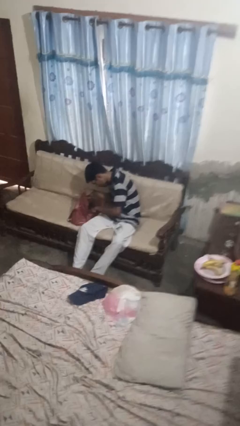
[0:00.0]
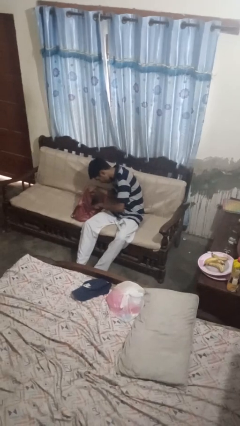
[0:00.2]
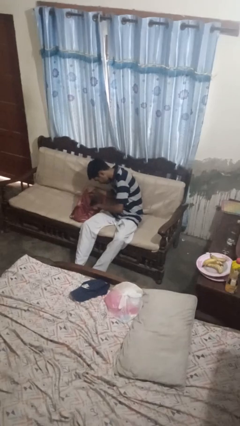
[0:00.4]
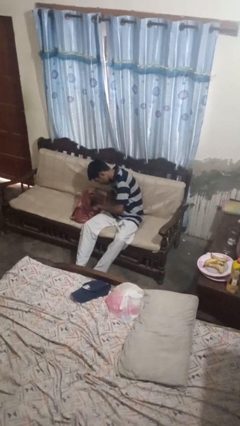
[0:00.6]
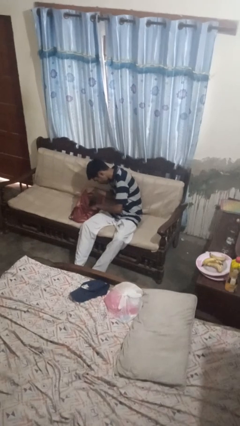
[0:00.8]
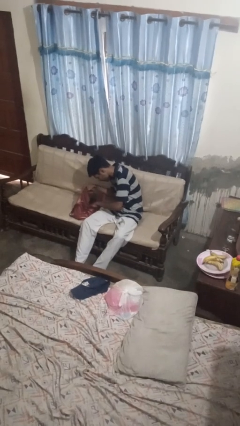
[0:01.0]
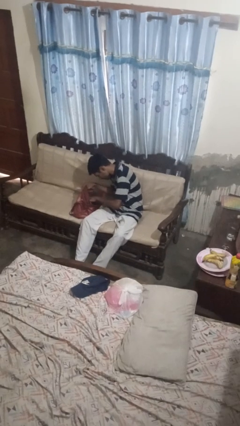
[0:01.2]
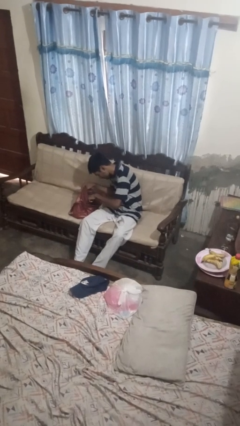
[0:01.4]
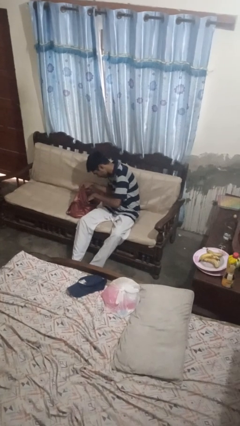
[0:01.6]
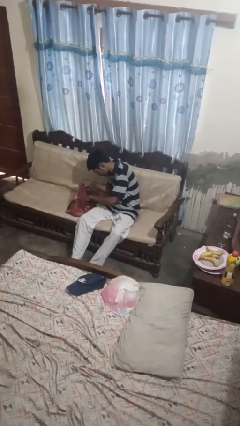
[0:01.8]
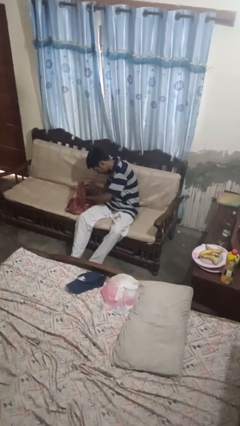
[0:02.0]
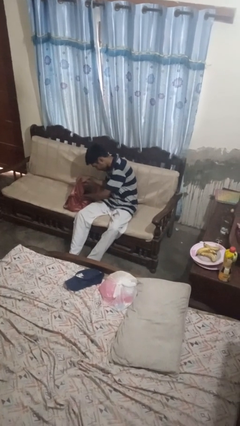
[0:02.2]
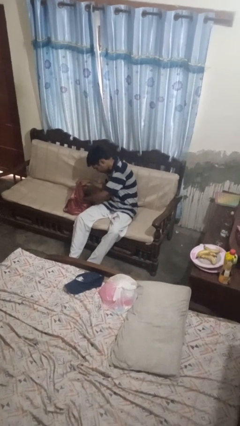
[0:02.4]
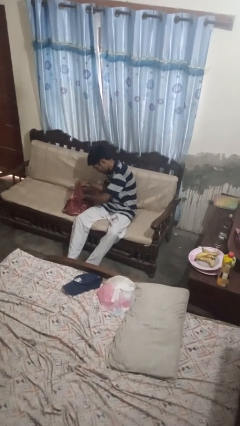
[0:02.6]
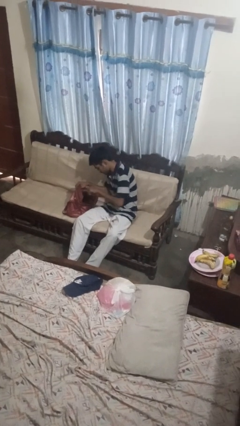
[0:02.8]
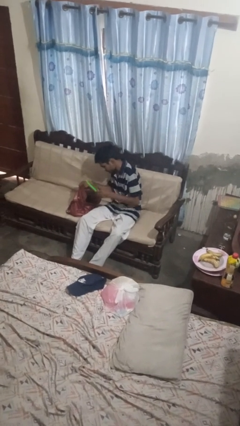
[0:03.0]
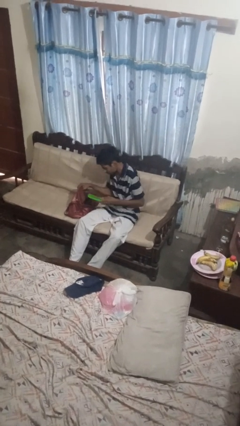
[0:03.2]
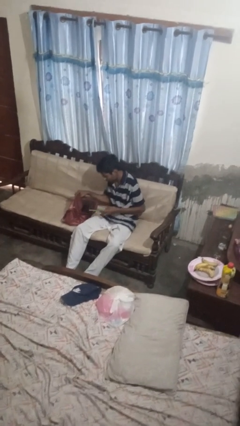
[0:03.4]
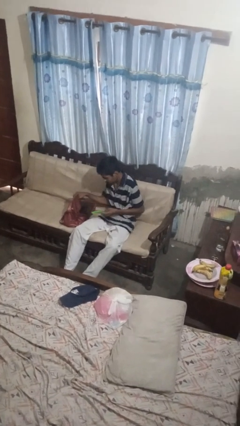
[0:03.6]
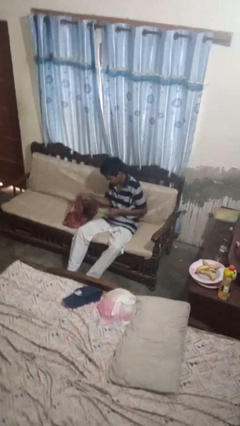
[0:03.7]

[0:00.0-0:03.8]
person takes object from purse

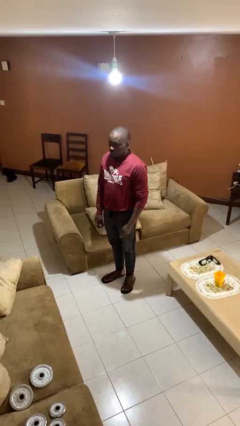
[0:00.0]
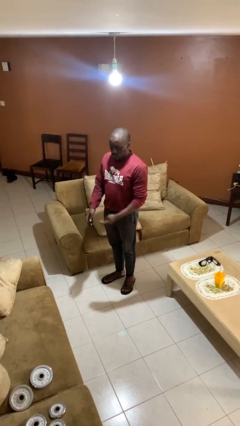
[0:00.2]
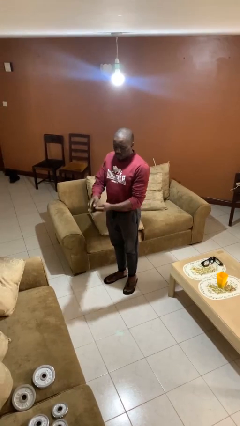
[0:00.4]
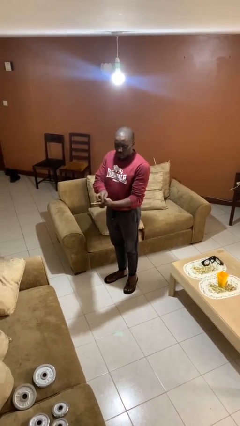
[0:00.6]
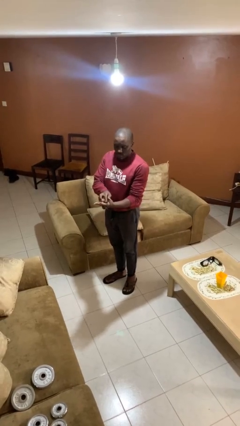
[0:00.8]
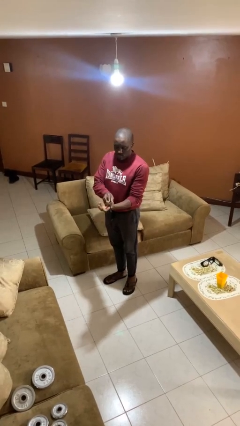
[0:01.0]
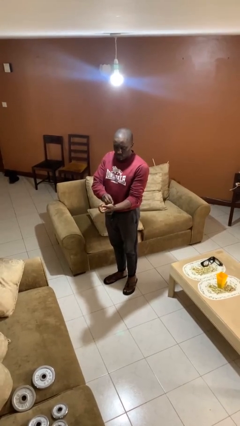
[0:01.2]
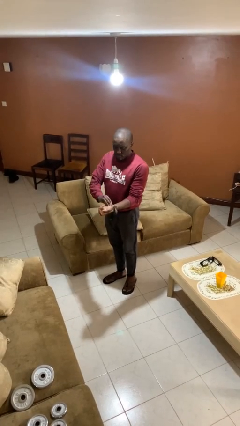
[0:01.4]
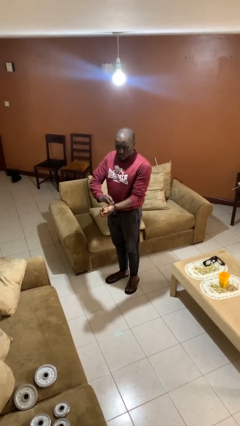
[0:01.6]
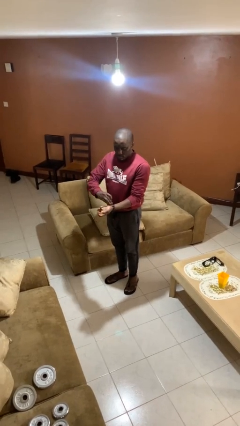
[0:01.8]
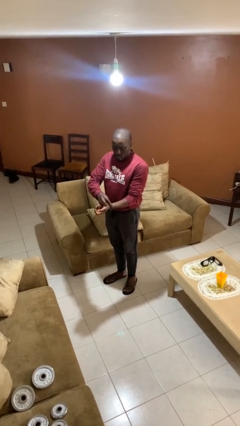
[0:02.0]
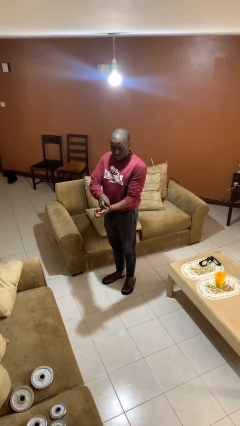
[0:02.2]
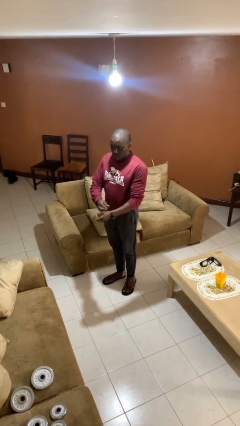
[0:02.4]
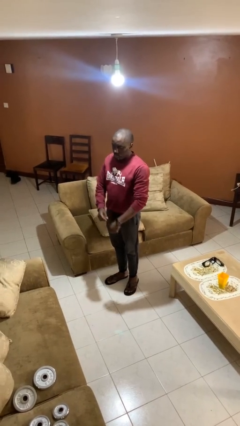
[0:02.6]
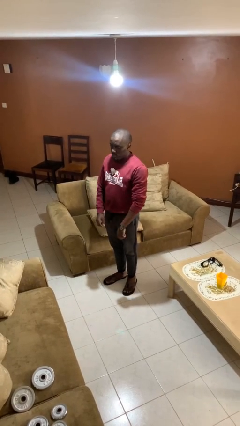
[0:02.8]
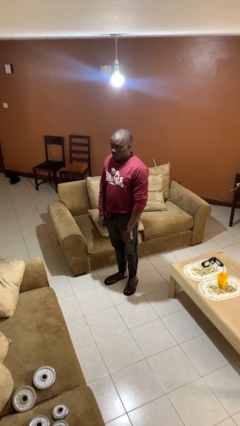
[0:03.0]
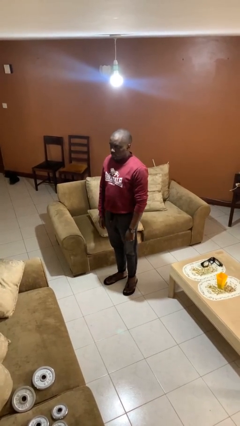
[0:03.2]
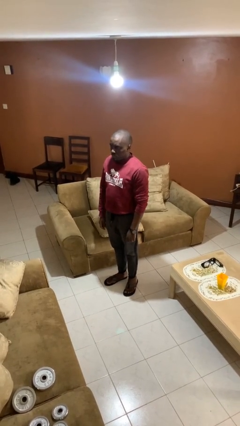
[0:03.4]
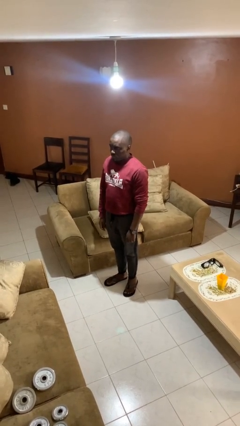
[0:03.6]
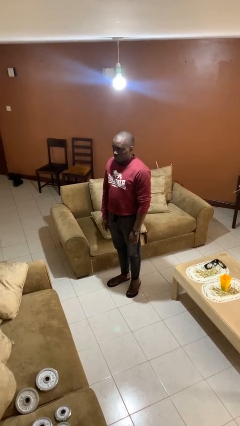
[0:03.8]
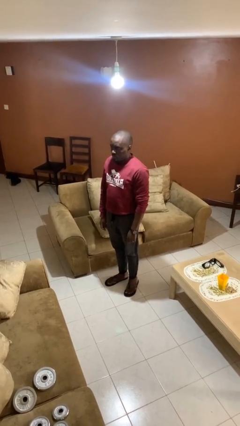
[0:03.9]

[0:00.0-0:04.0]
person puts on wristwatch

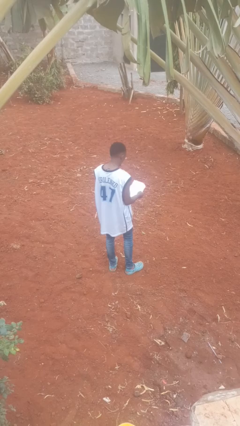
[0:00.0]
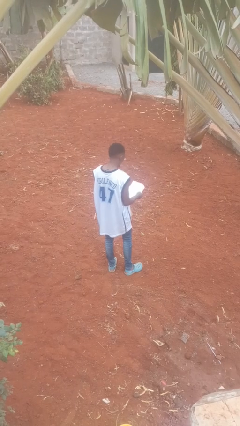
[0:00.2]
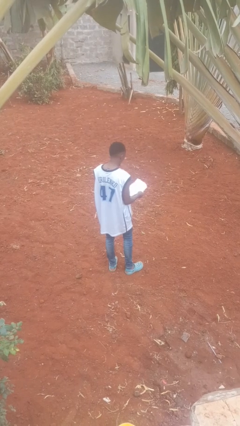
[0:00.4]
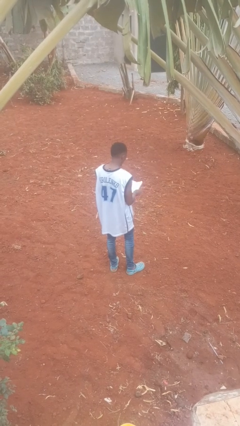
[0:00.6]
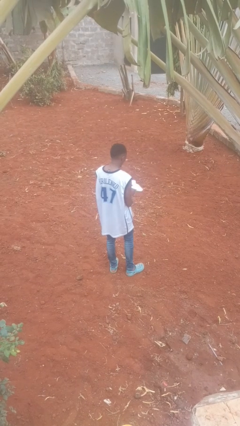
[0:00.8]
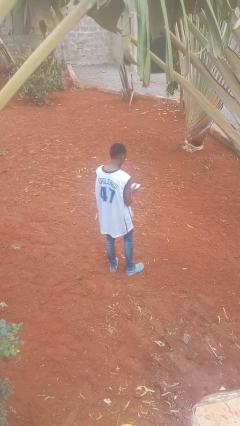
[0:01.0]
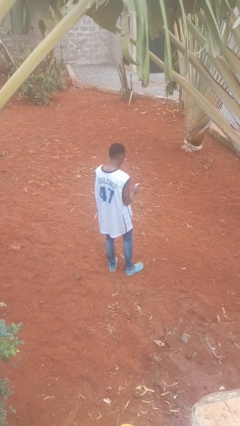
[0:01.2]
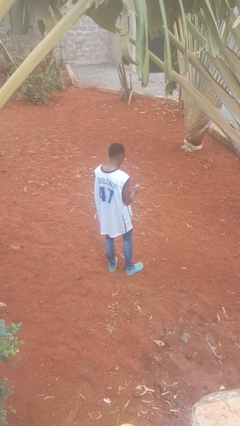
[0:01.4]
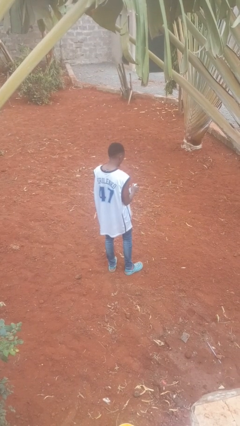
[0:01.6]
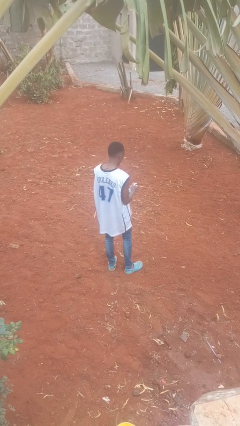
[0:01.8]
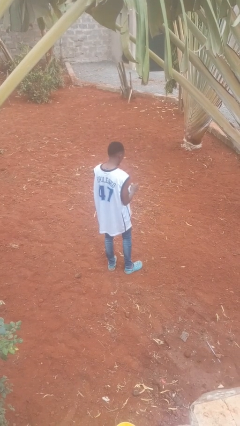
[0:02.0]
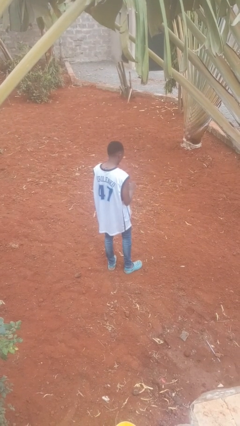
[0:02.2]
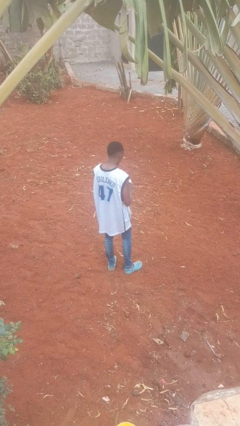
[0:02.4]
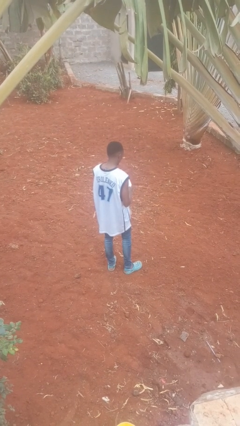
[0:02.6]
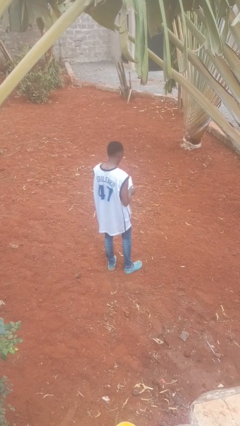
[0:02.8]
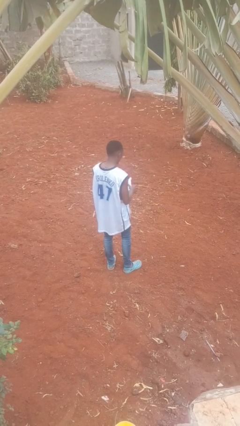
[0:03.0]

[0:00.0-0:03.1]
person crumples paper

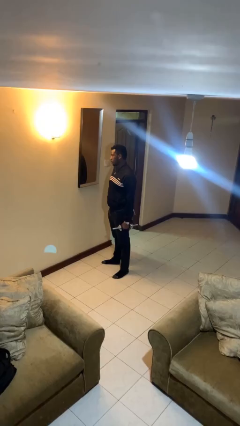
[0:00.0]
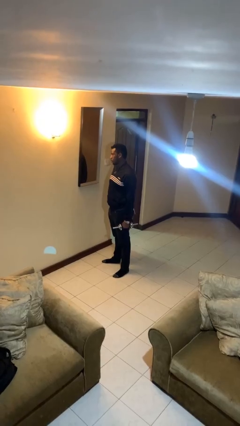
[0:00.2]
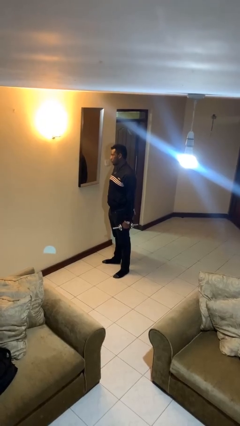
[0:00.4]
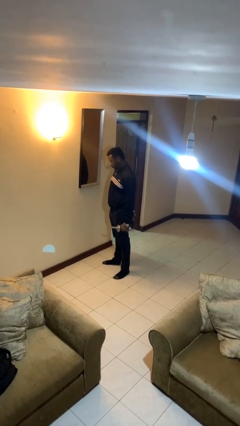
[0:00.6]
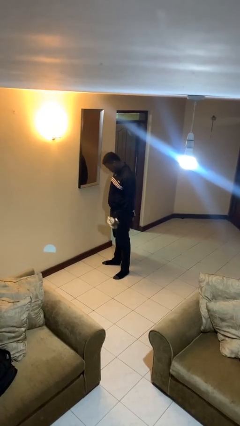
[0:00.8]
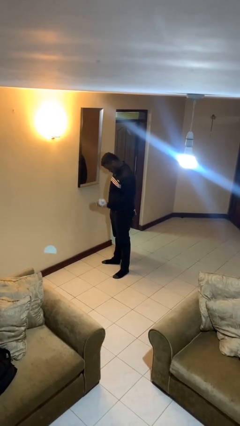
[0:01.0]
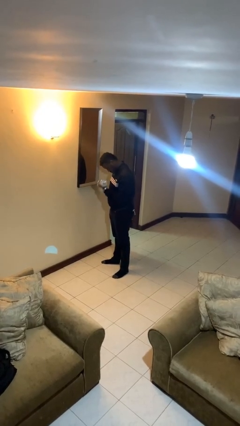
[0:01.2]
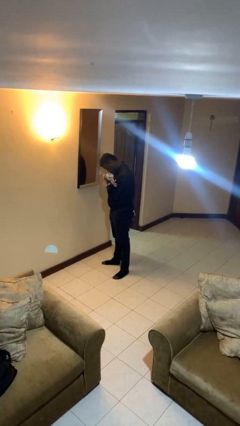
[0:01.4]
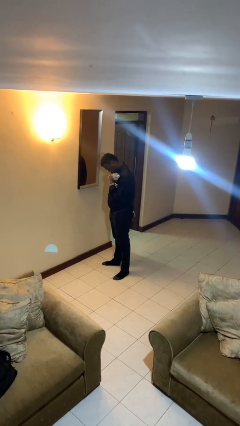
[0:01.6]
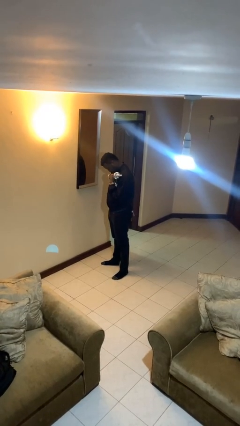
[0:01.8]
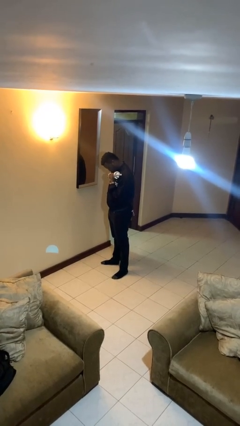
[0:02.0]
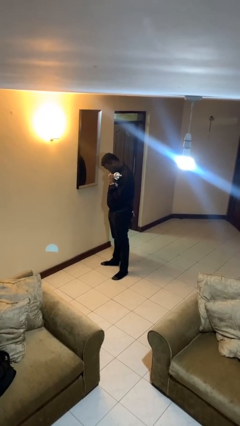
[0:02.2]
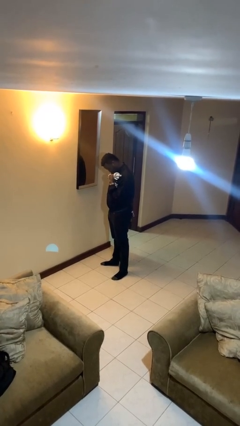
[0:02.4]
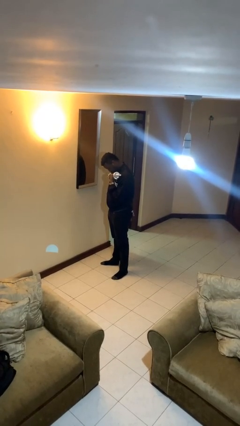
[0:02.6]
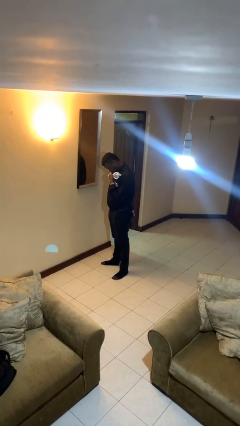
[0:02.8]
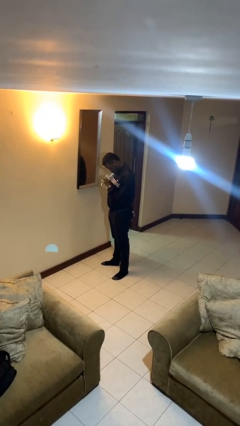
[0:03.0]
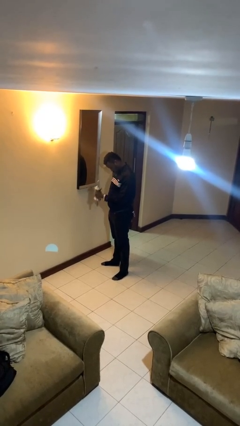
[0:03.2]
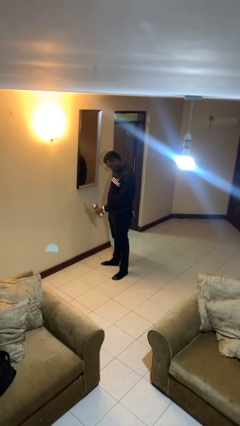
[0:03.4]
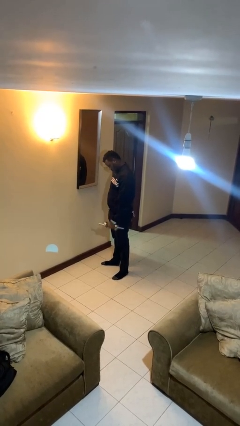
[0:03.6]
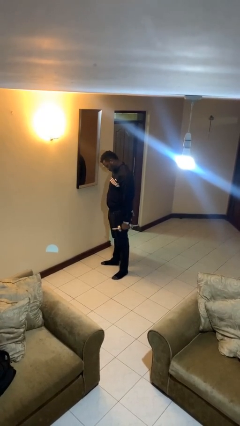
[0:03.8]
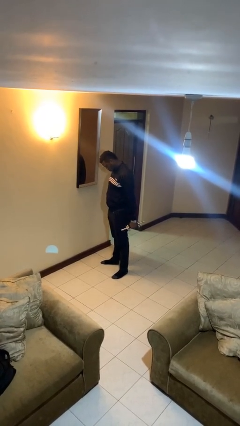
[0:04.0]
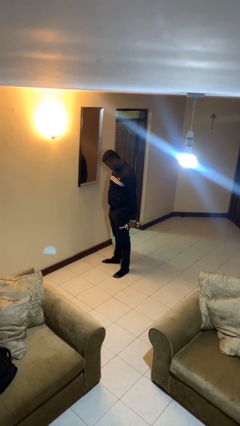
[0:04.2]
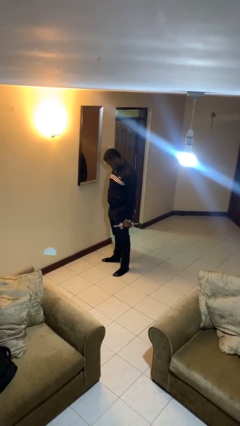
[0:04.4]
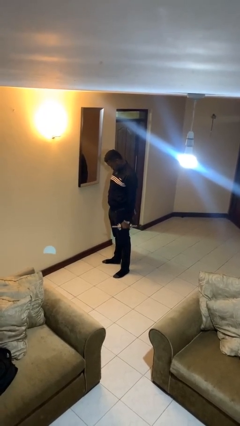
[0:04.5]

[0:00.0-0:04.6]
person lifts dumbbells

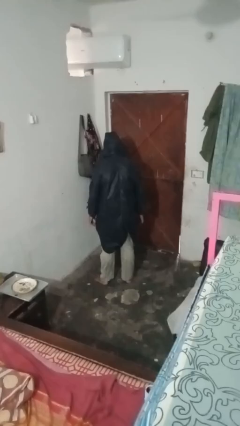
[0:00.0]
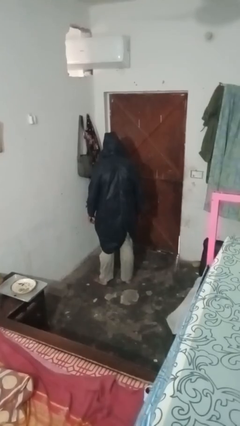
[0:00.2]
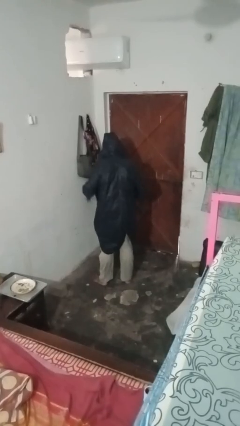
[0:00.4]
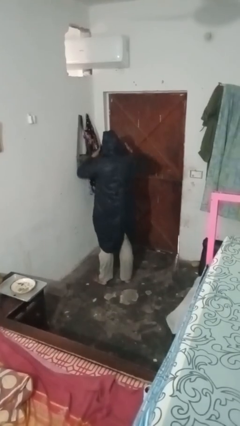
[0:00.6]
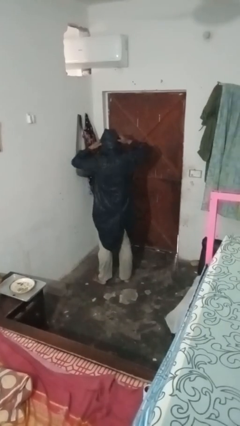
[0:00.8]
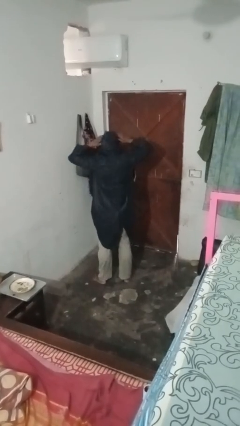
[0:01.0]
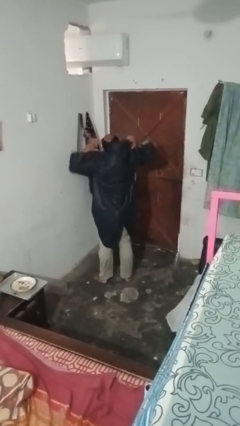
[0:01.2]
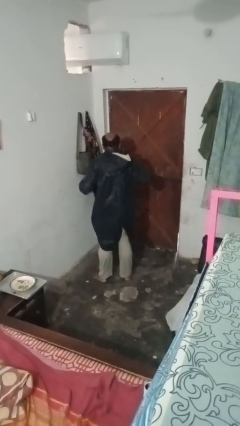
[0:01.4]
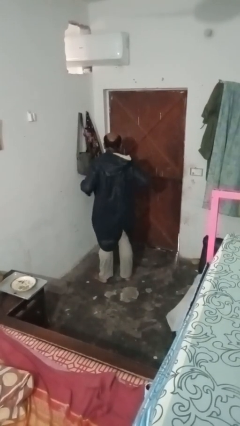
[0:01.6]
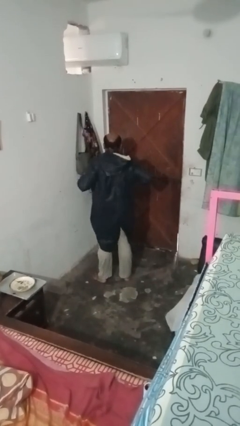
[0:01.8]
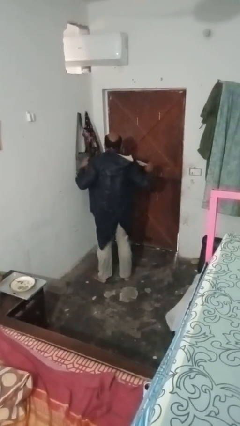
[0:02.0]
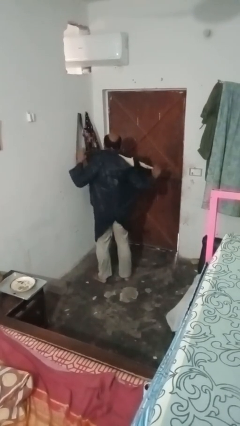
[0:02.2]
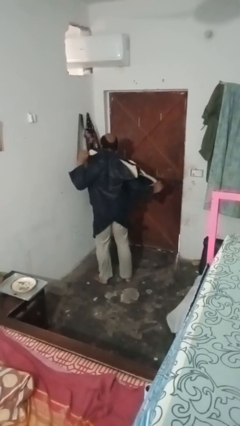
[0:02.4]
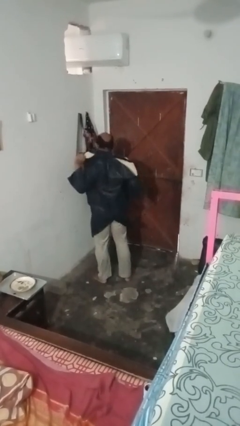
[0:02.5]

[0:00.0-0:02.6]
person takes off hoodie
